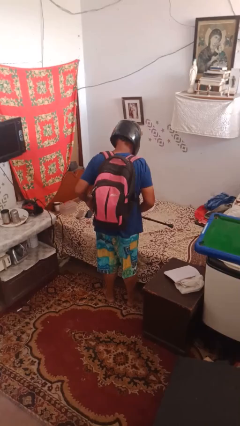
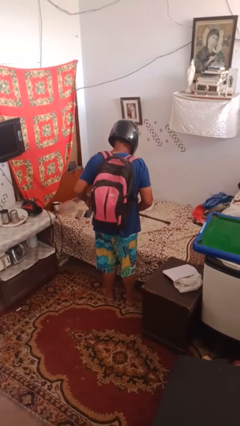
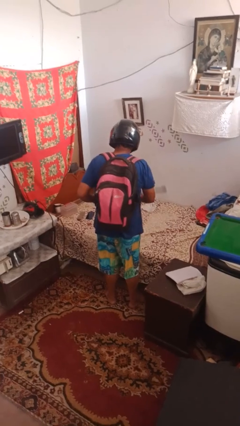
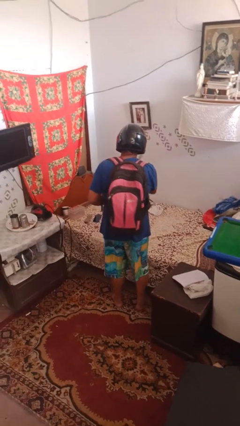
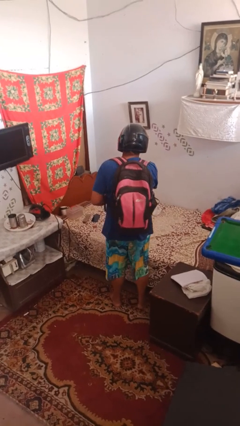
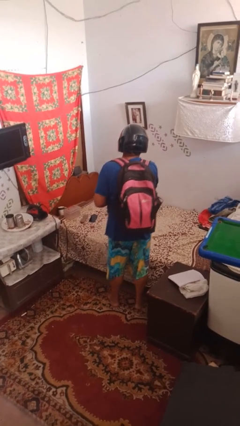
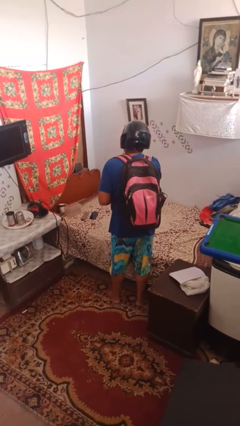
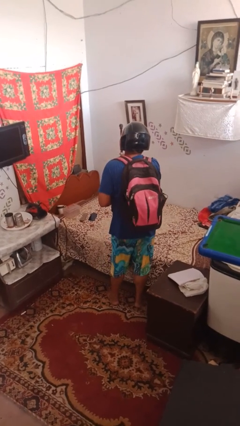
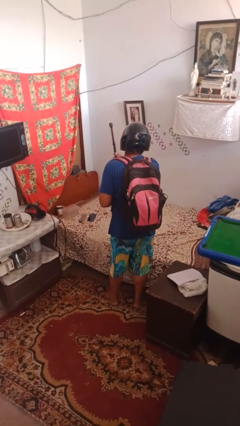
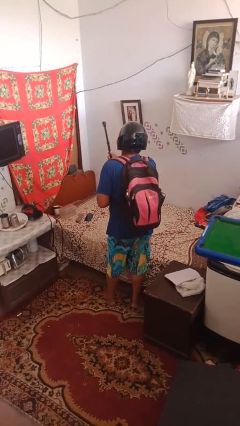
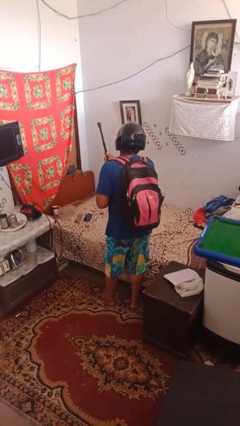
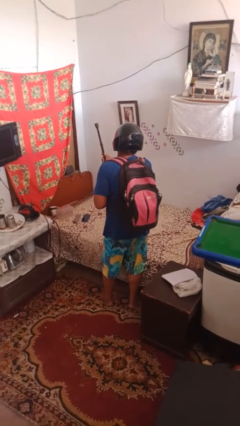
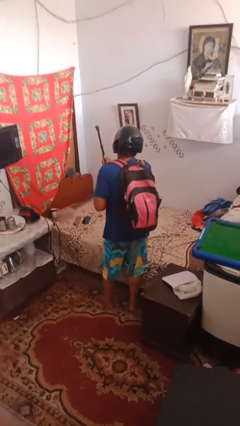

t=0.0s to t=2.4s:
person swats bug

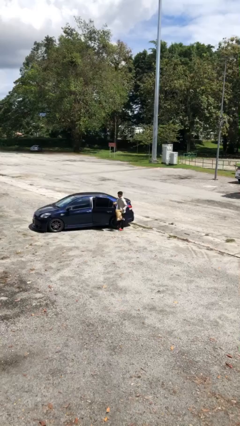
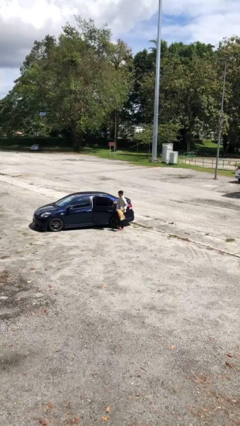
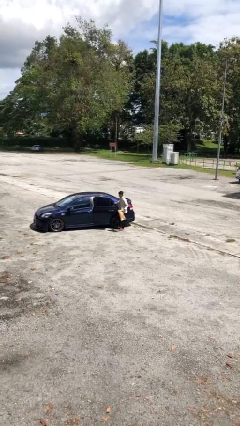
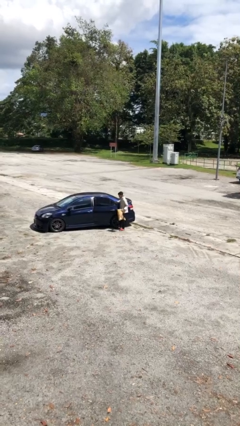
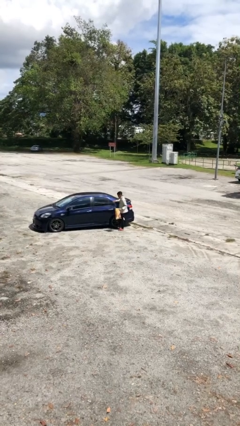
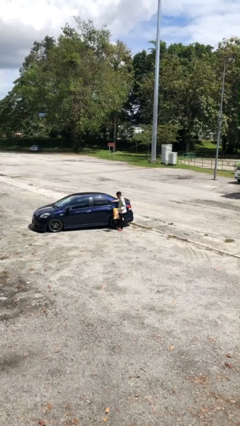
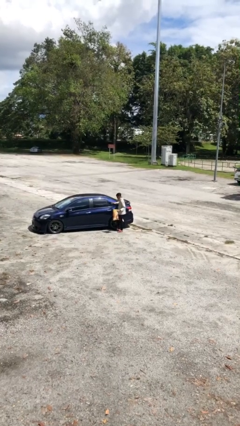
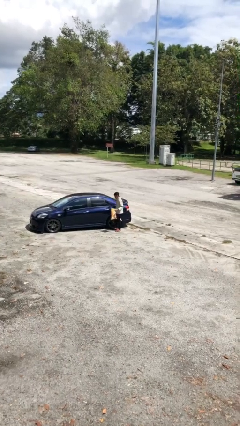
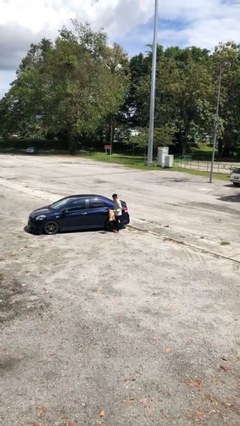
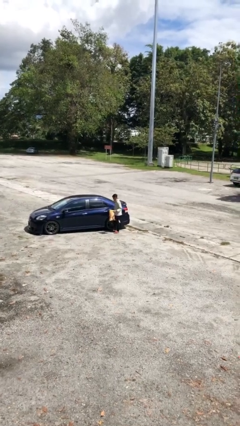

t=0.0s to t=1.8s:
person closes car door

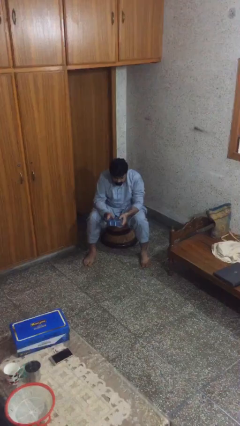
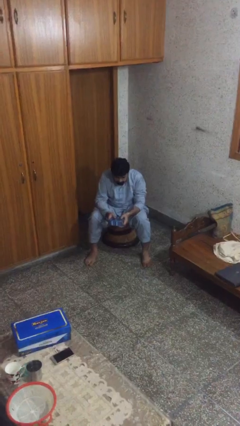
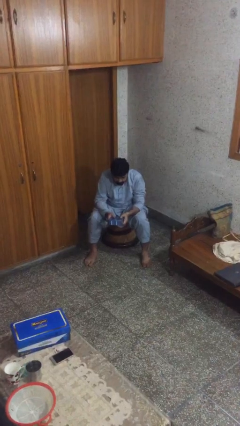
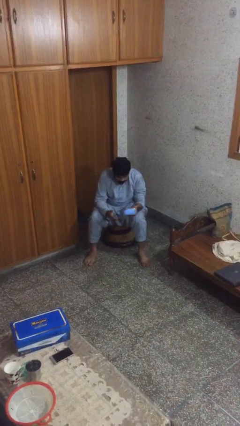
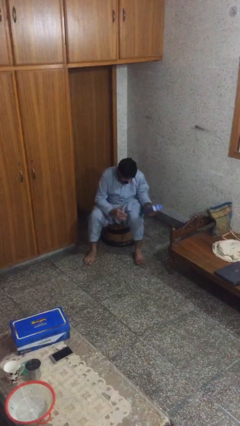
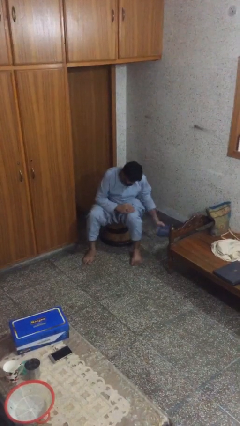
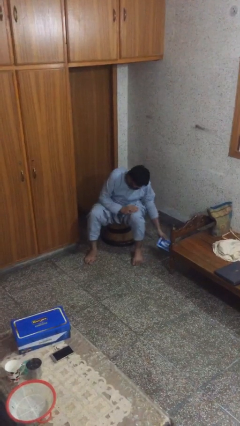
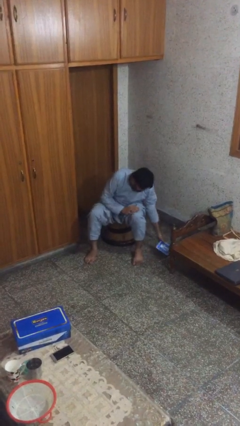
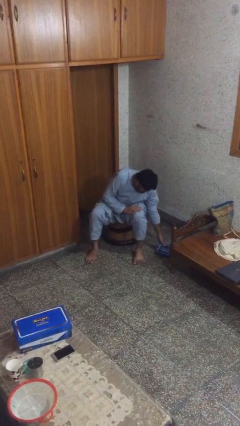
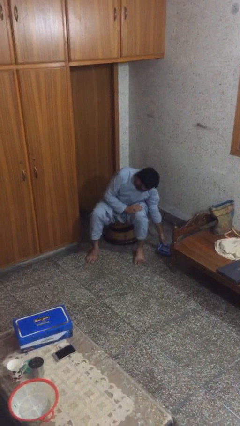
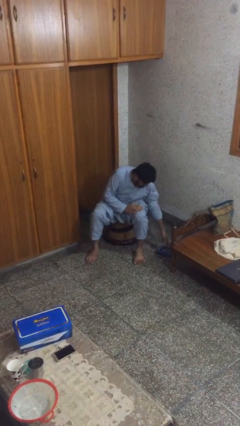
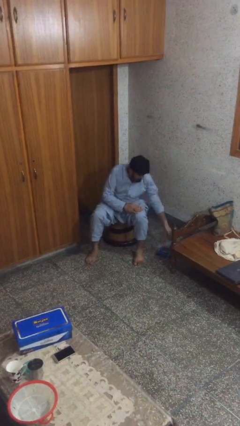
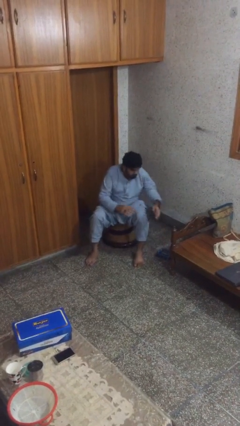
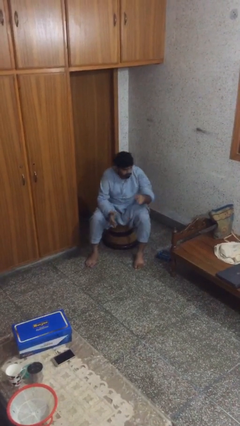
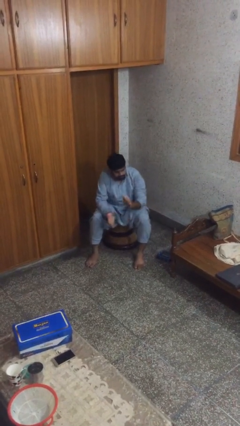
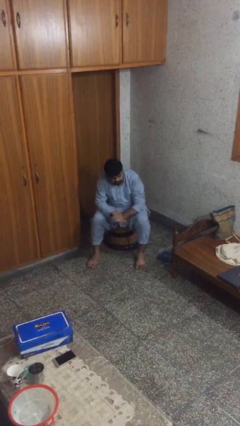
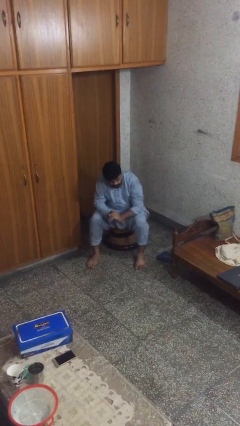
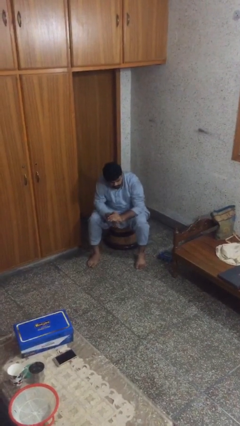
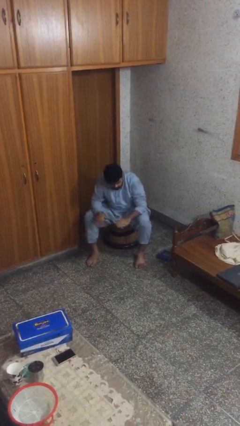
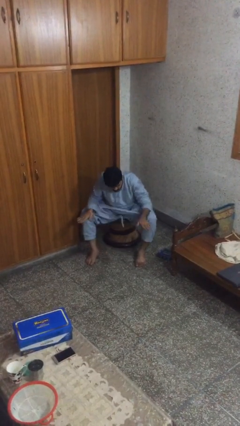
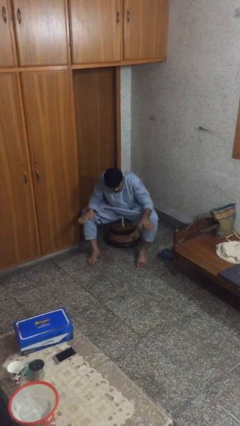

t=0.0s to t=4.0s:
person puts down object on floor

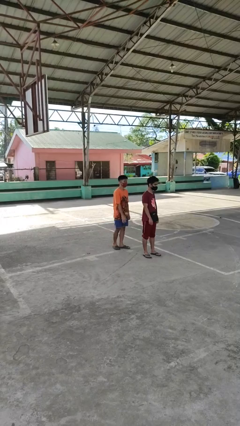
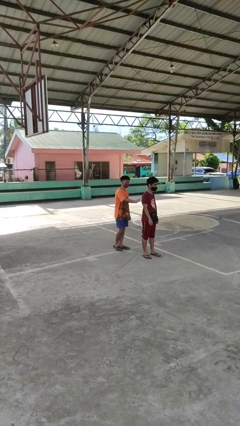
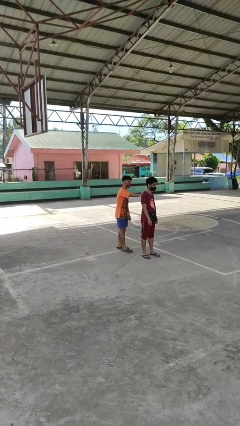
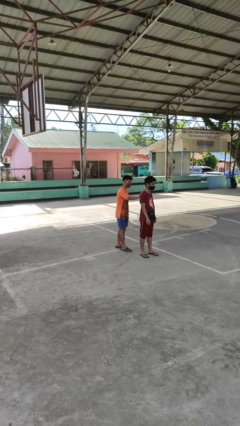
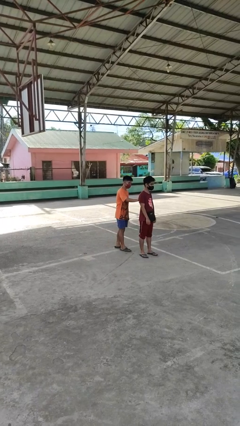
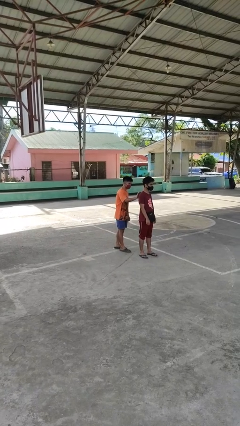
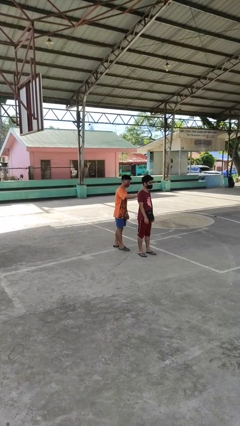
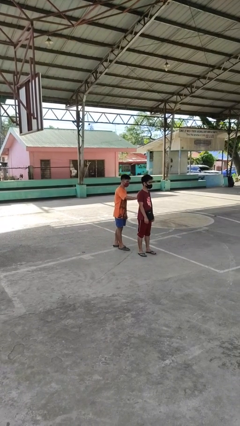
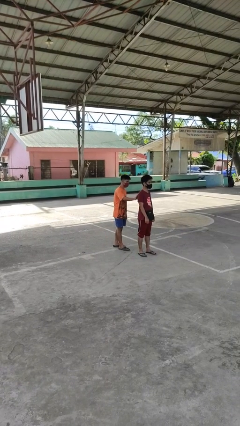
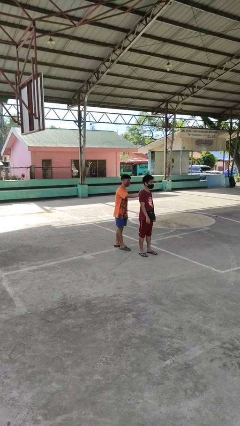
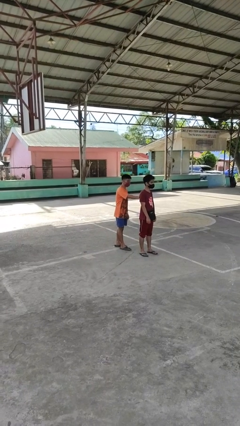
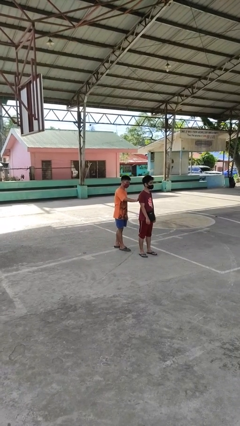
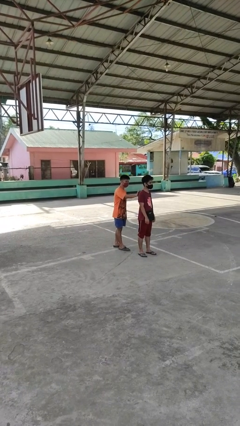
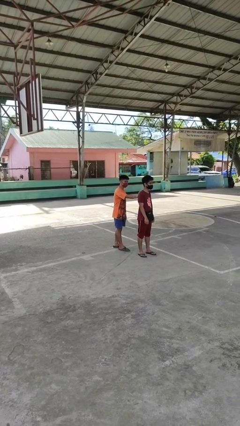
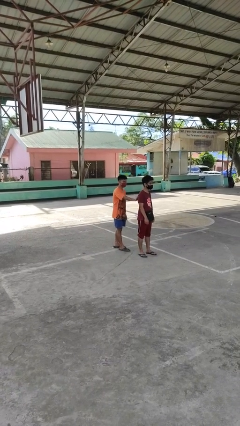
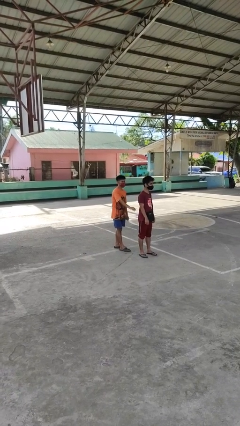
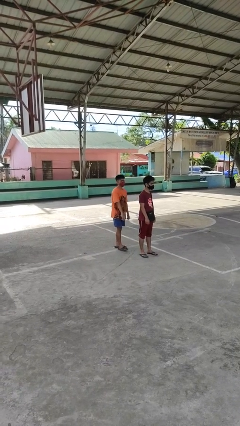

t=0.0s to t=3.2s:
person touches back of person

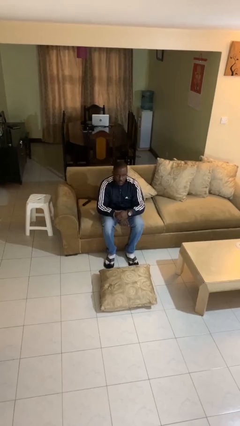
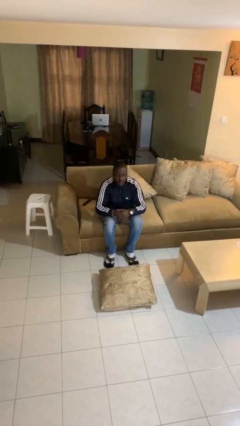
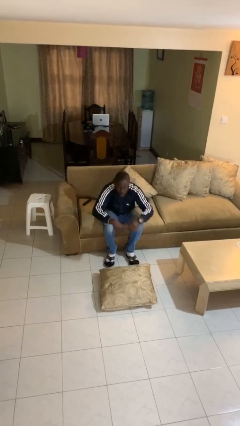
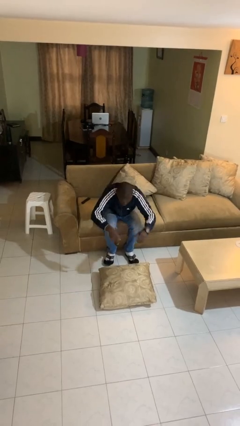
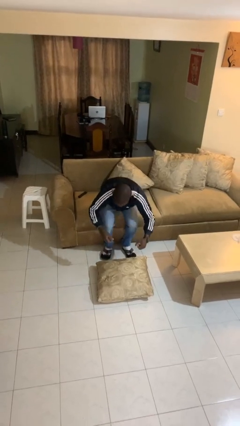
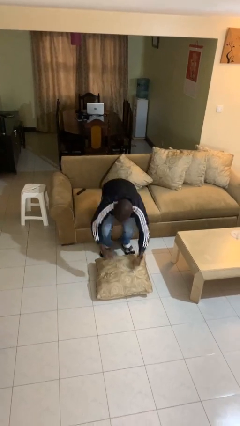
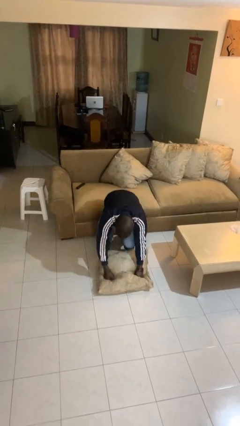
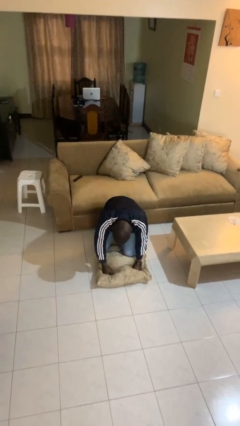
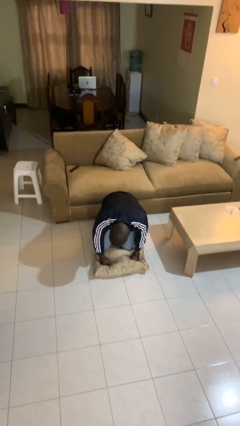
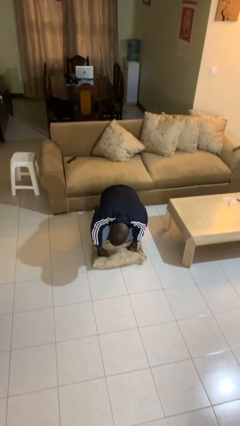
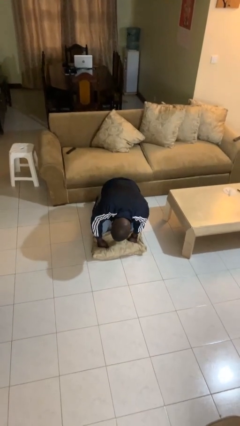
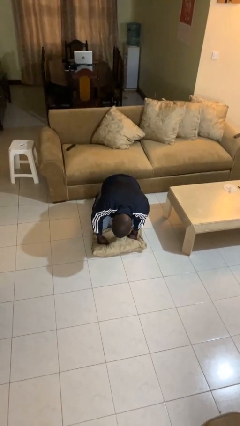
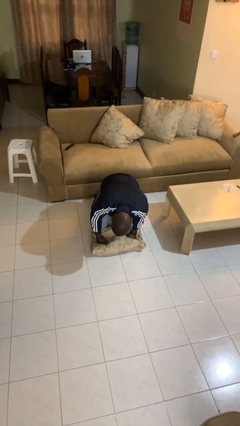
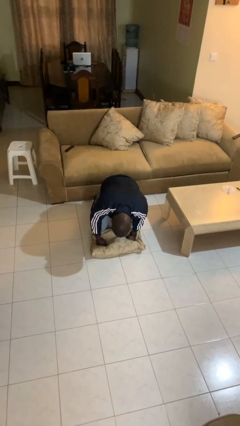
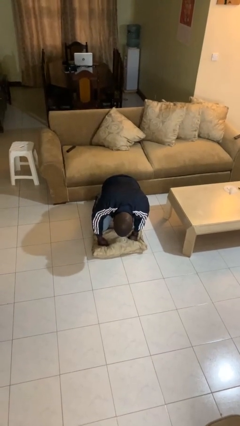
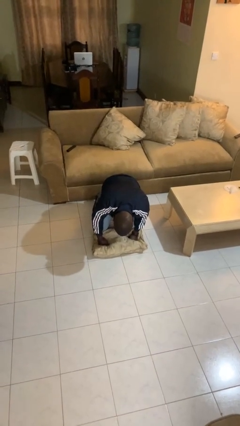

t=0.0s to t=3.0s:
person falls from chair

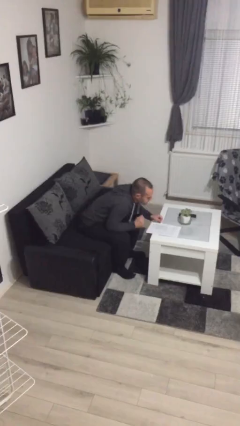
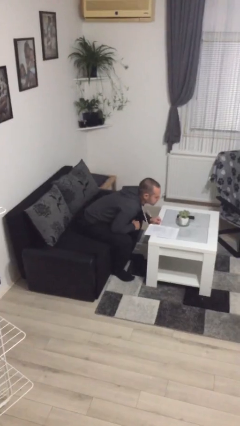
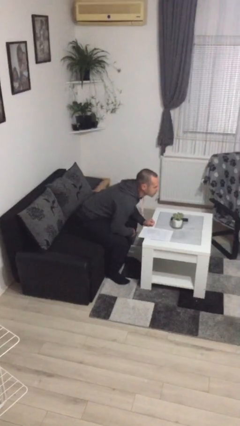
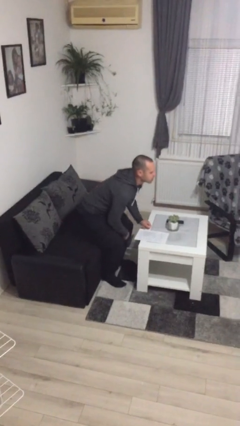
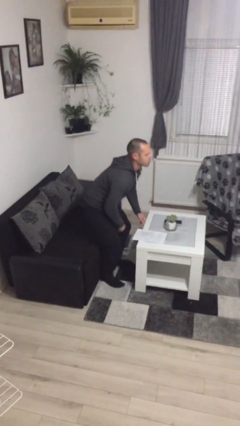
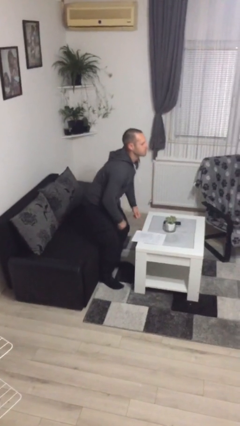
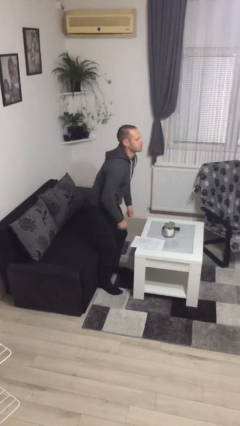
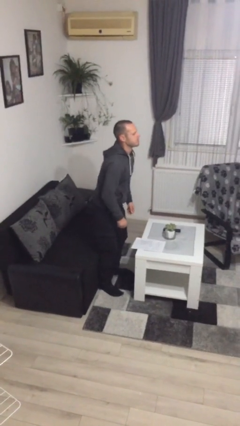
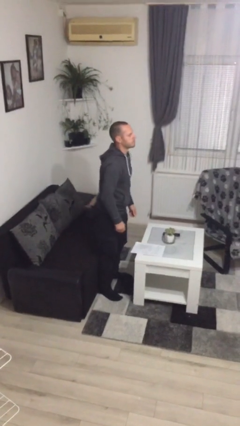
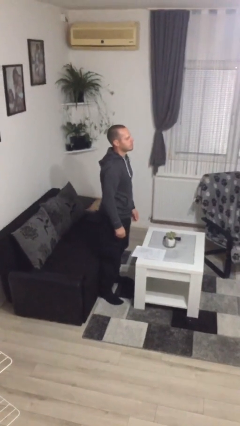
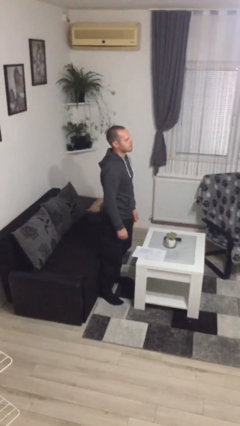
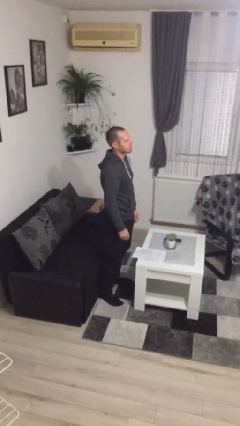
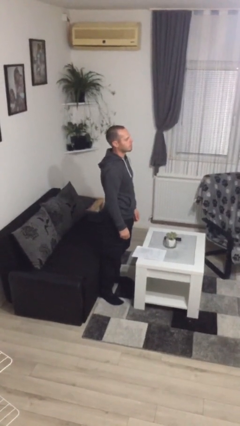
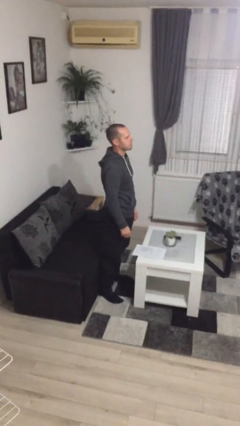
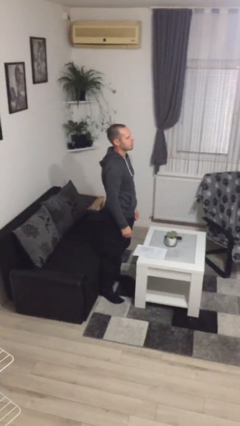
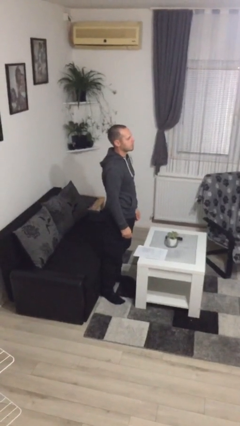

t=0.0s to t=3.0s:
person stands up
